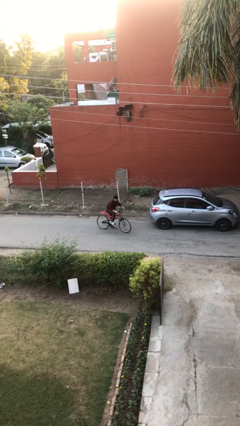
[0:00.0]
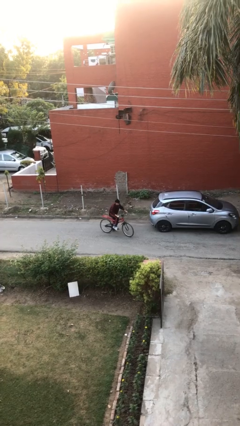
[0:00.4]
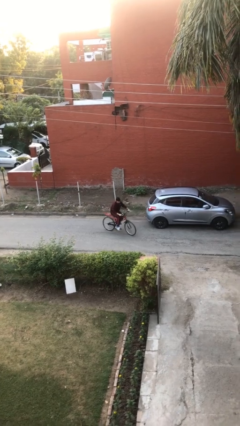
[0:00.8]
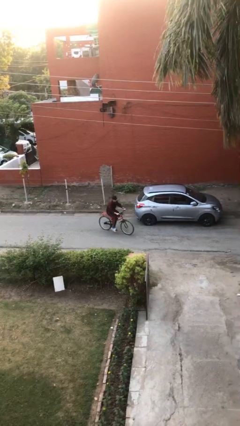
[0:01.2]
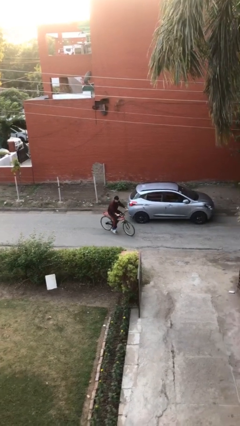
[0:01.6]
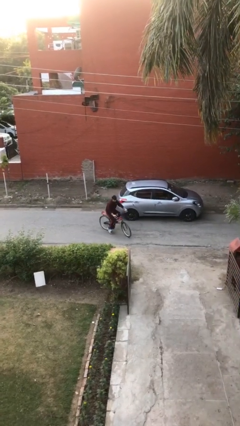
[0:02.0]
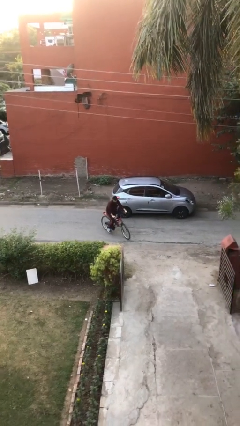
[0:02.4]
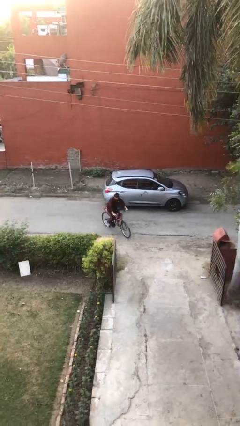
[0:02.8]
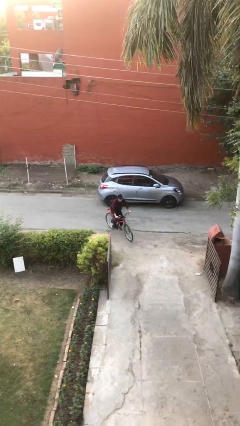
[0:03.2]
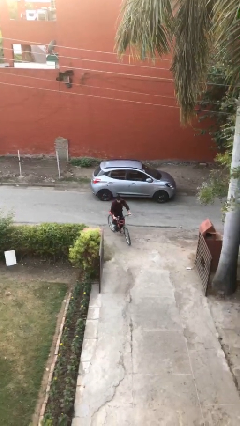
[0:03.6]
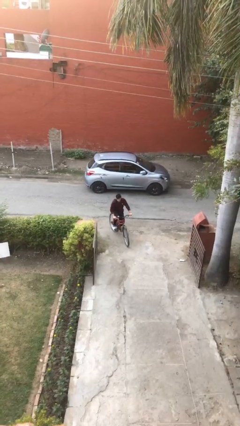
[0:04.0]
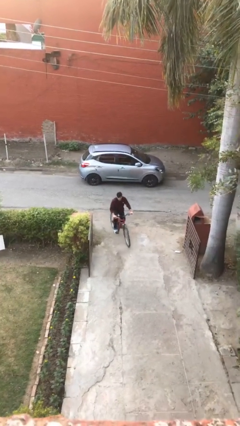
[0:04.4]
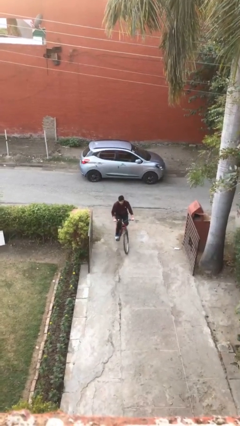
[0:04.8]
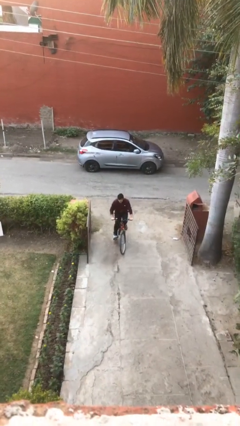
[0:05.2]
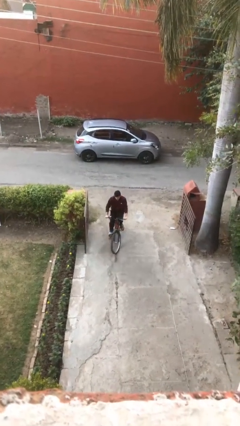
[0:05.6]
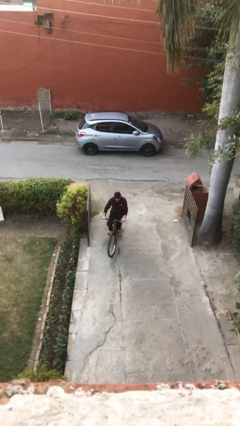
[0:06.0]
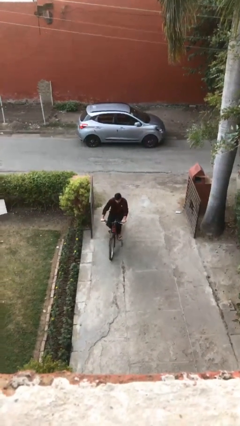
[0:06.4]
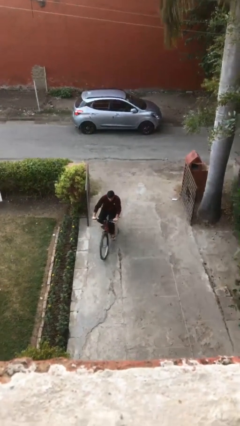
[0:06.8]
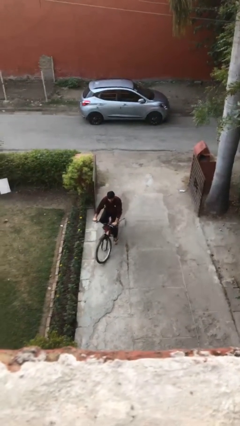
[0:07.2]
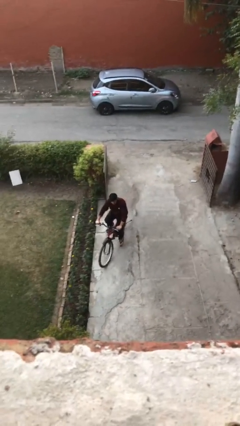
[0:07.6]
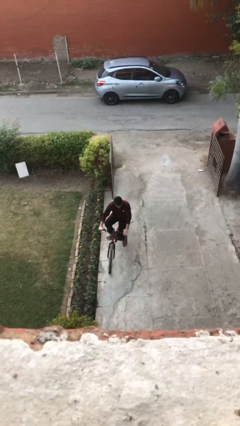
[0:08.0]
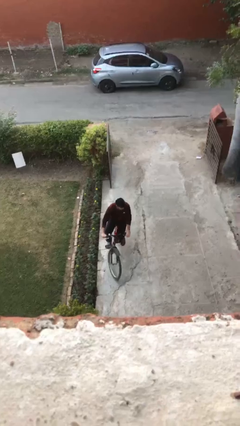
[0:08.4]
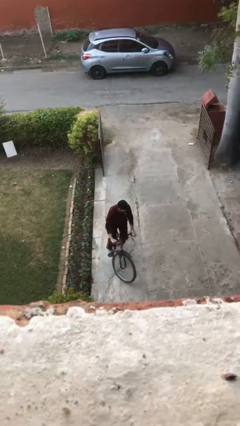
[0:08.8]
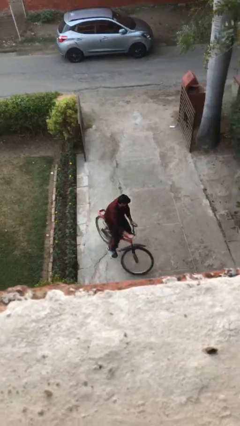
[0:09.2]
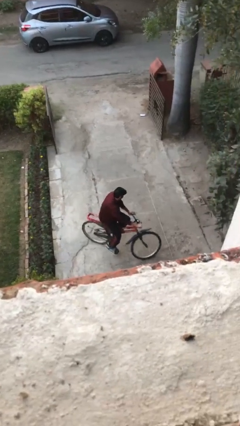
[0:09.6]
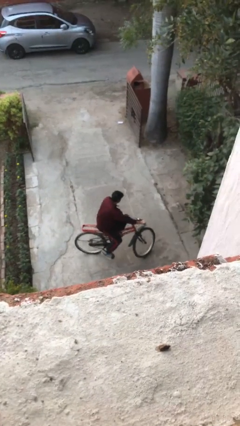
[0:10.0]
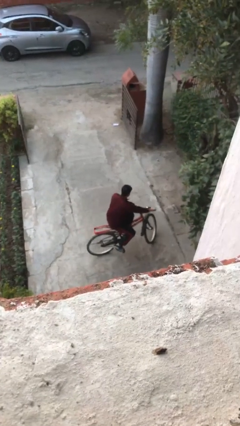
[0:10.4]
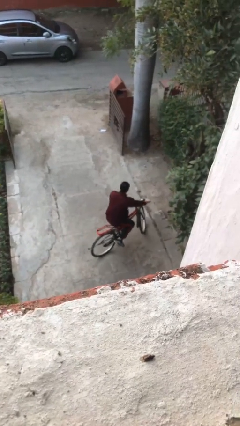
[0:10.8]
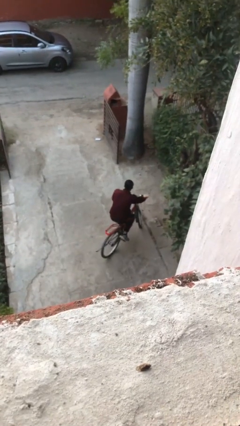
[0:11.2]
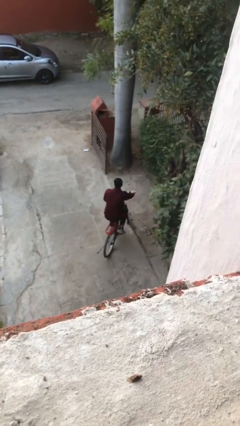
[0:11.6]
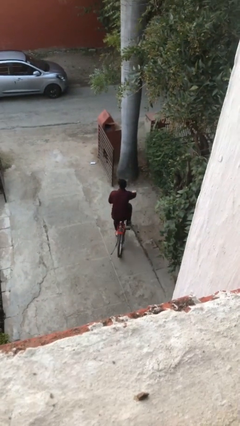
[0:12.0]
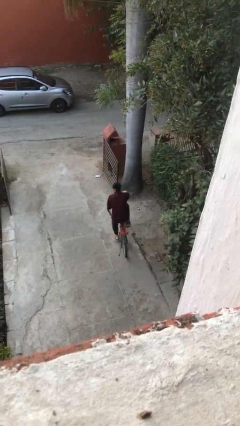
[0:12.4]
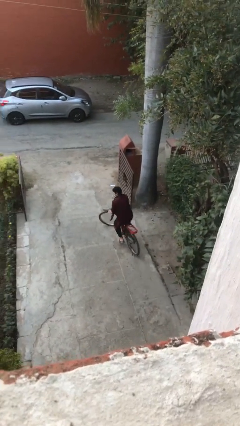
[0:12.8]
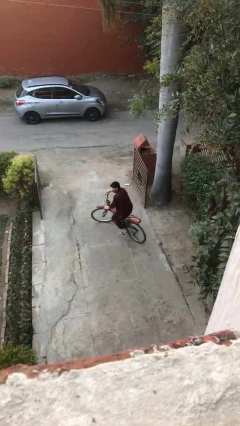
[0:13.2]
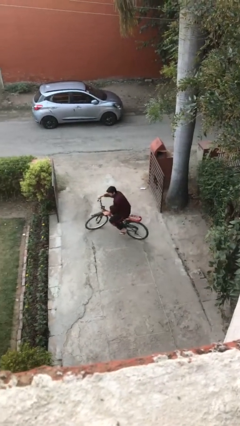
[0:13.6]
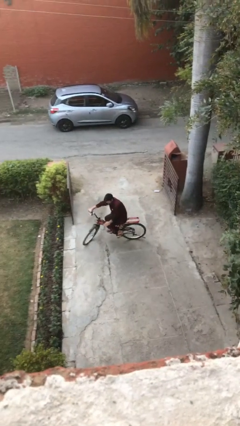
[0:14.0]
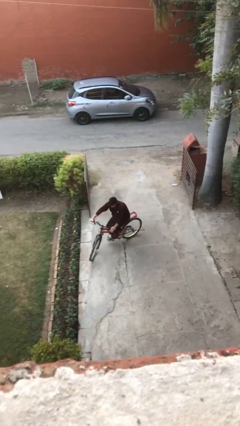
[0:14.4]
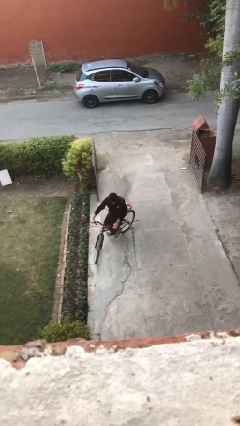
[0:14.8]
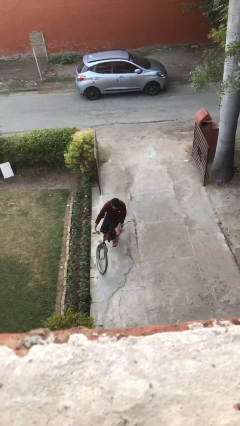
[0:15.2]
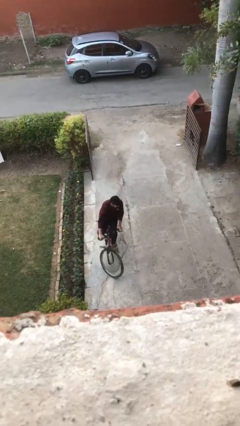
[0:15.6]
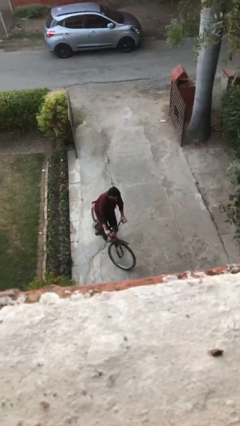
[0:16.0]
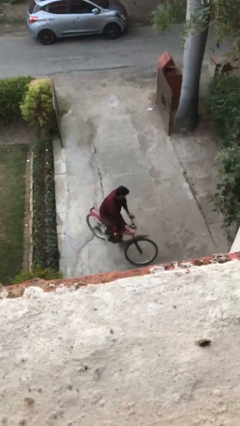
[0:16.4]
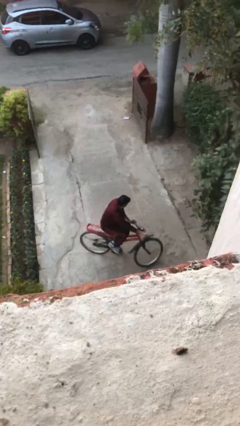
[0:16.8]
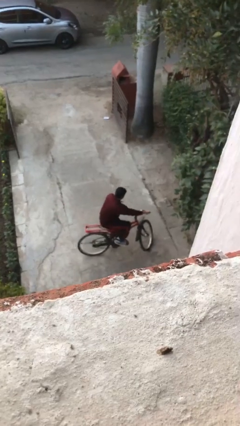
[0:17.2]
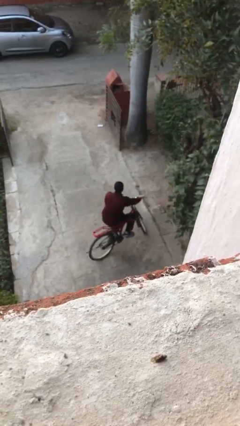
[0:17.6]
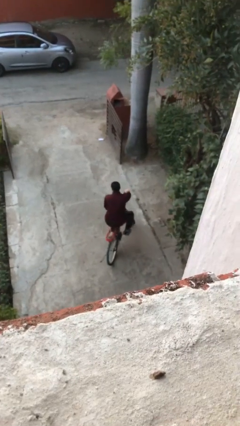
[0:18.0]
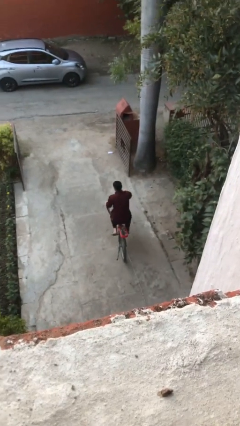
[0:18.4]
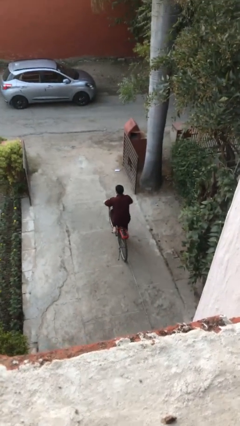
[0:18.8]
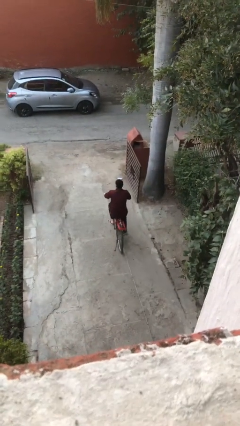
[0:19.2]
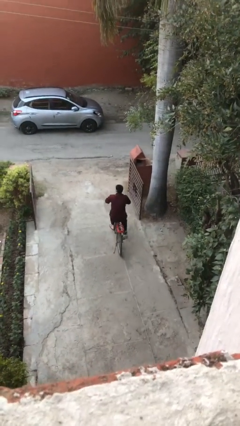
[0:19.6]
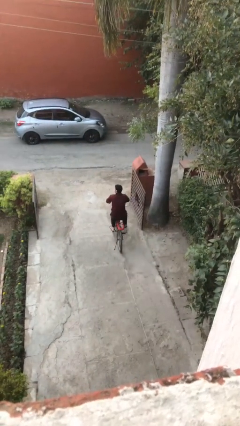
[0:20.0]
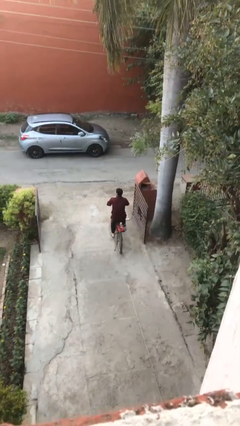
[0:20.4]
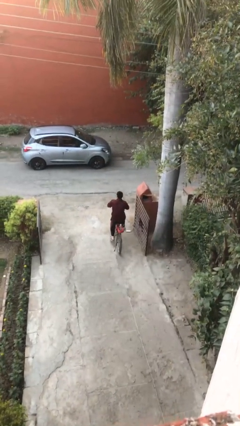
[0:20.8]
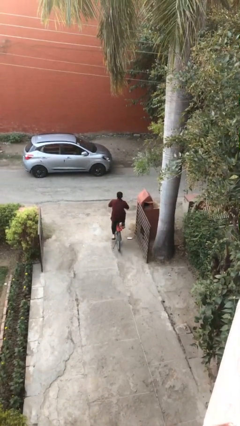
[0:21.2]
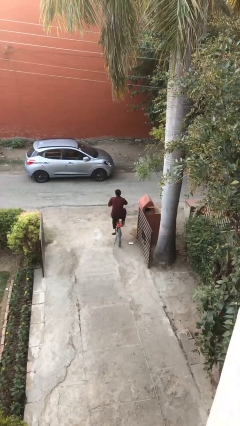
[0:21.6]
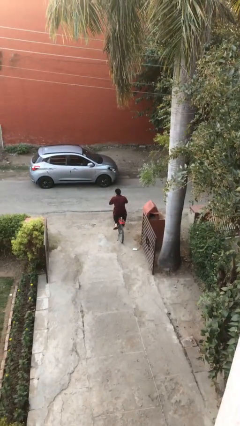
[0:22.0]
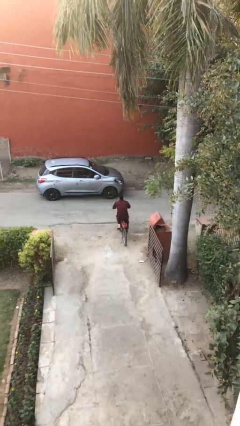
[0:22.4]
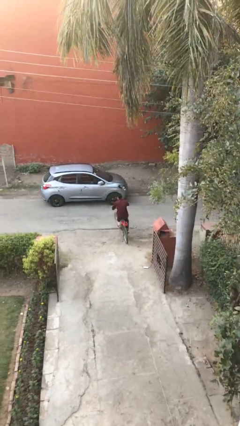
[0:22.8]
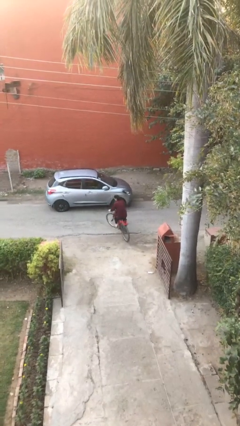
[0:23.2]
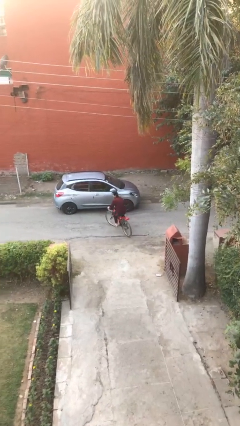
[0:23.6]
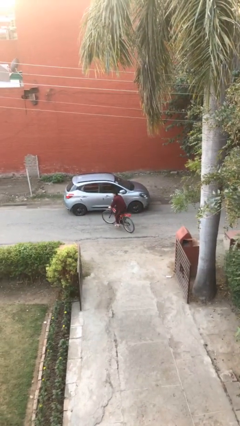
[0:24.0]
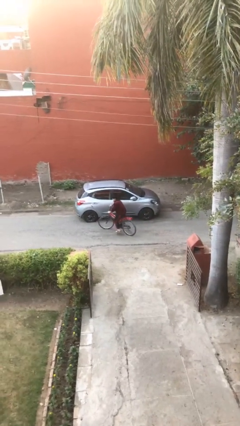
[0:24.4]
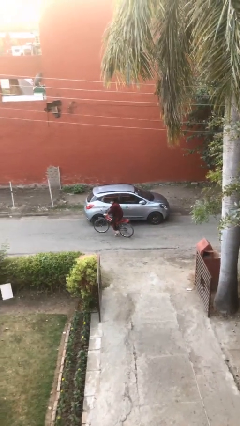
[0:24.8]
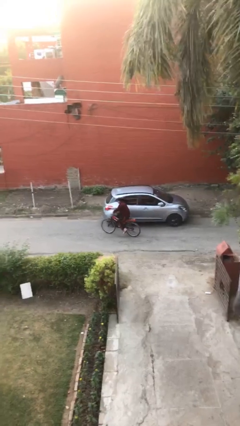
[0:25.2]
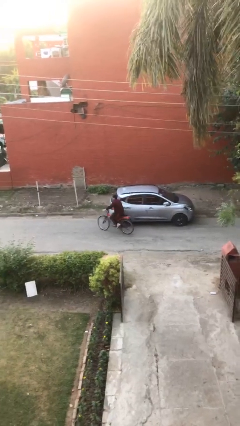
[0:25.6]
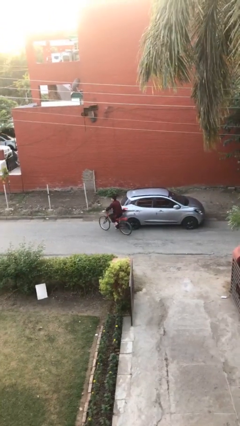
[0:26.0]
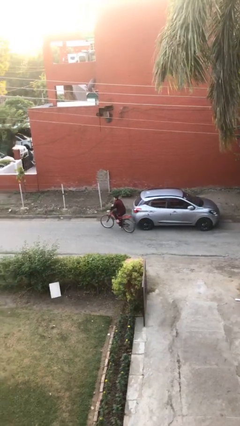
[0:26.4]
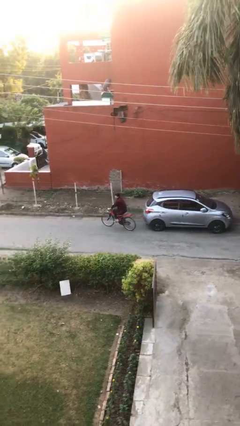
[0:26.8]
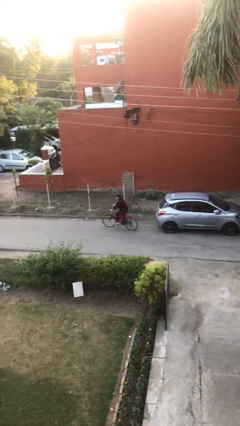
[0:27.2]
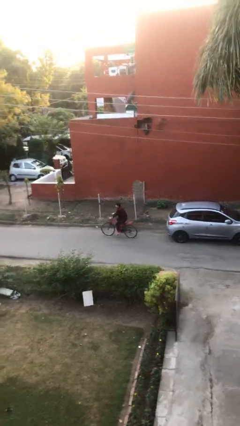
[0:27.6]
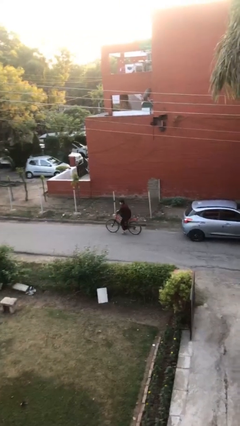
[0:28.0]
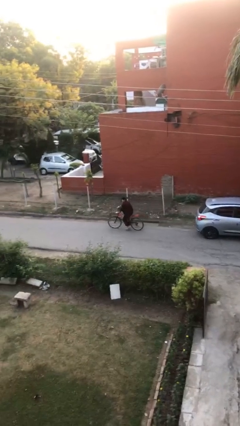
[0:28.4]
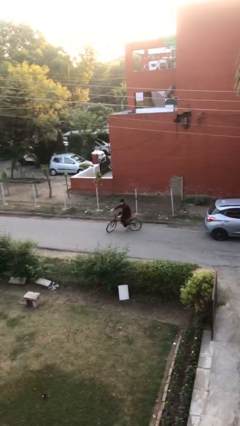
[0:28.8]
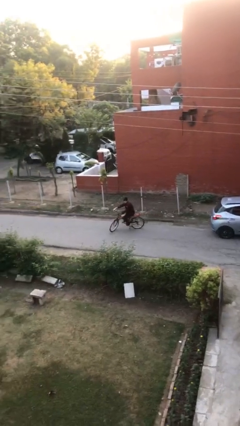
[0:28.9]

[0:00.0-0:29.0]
person rides bicycle

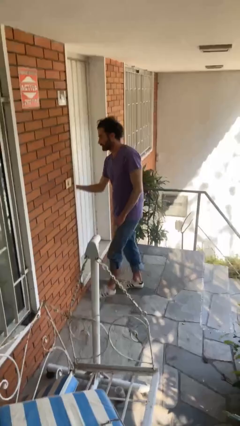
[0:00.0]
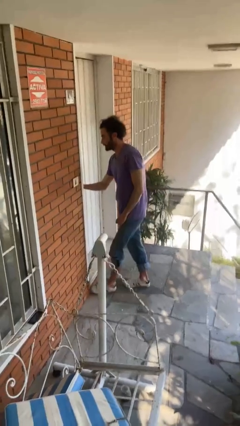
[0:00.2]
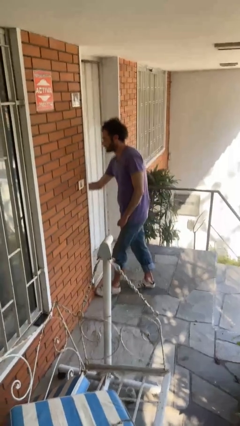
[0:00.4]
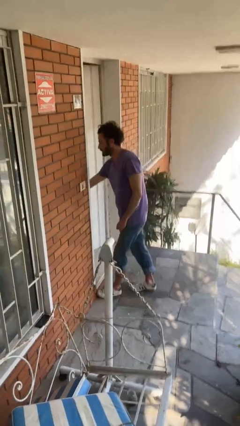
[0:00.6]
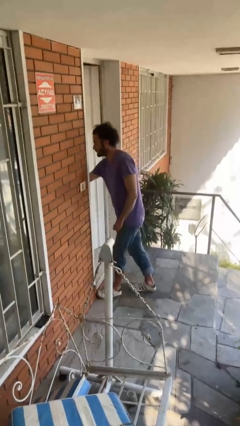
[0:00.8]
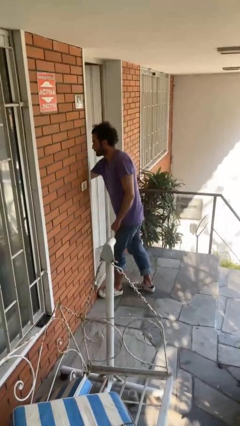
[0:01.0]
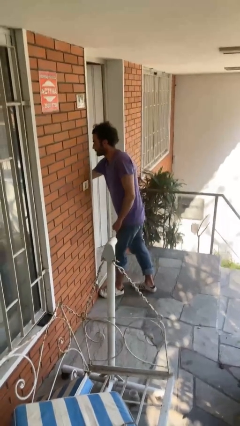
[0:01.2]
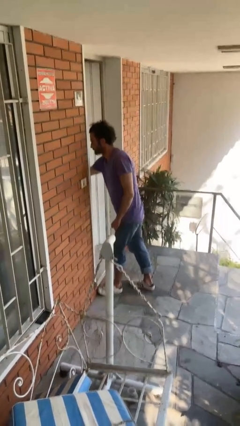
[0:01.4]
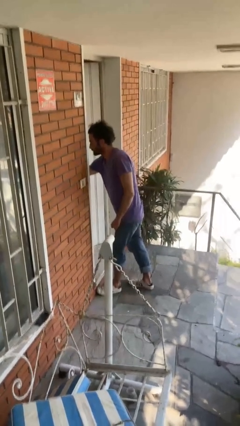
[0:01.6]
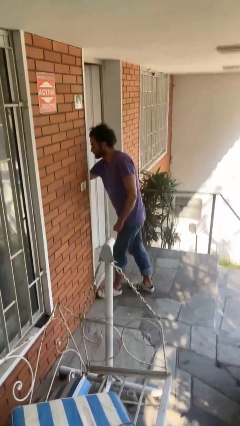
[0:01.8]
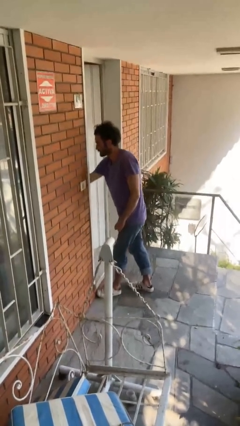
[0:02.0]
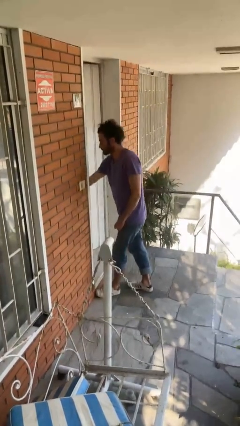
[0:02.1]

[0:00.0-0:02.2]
person opens facility door

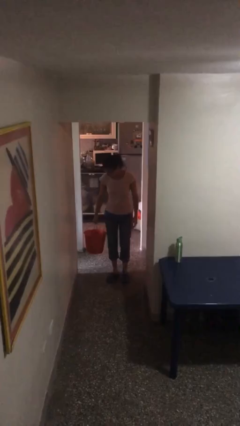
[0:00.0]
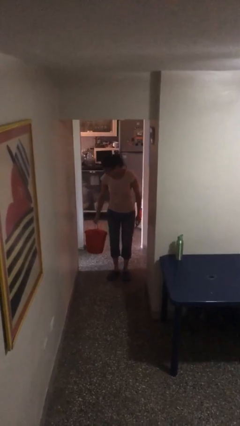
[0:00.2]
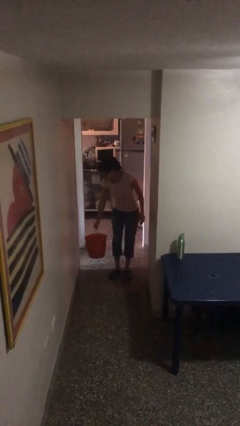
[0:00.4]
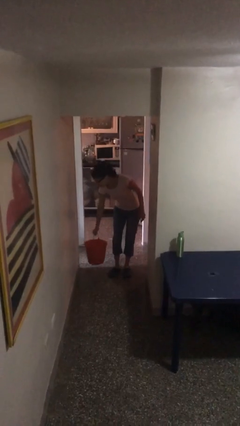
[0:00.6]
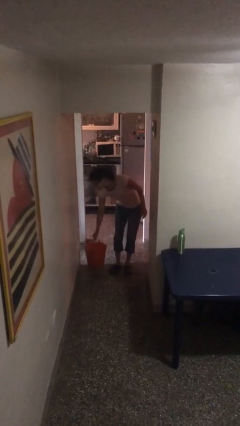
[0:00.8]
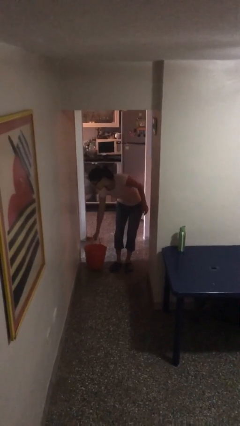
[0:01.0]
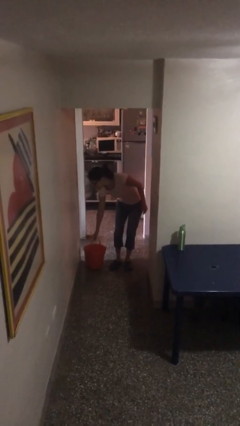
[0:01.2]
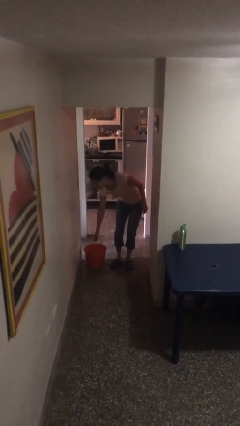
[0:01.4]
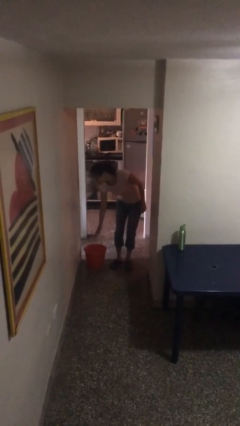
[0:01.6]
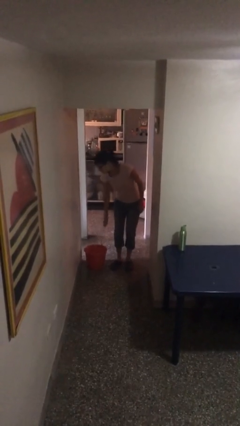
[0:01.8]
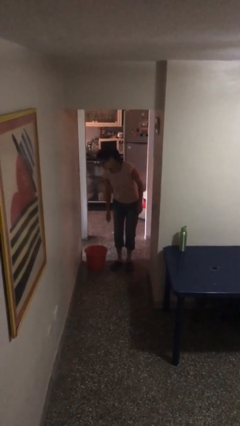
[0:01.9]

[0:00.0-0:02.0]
person puts down object on floor
